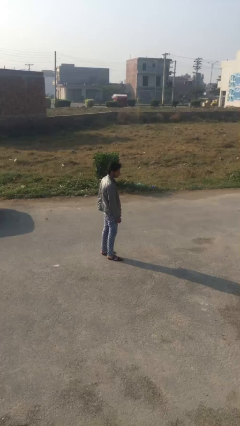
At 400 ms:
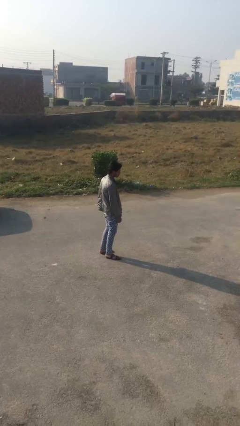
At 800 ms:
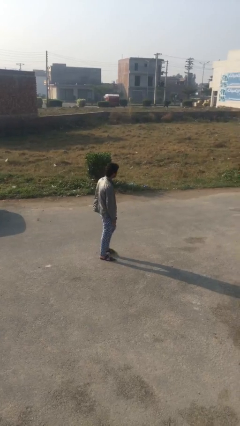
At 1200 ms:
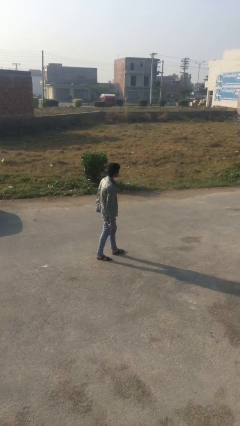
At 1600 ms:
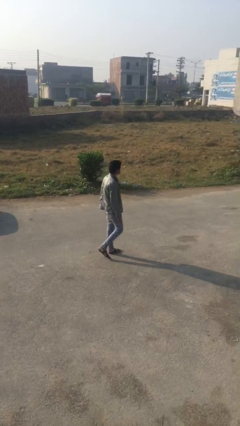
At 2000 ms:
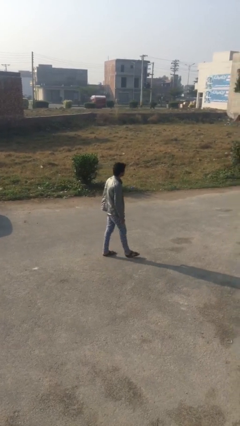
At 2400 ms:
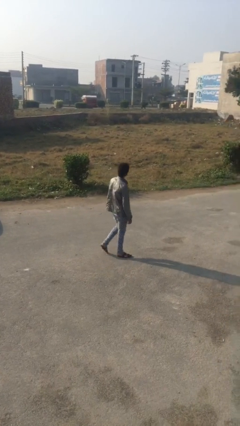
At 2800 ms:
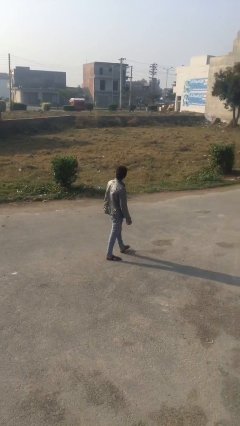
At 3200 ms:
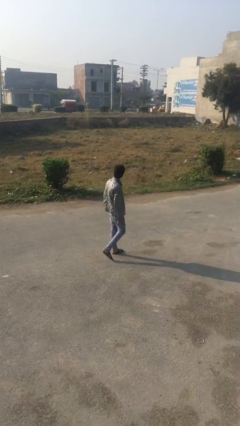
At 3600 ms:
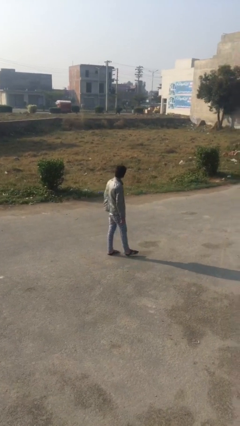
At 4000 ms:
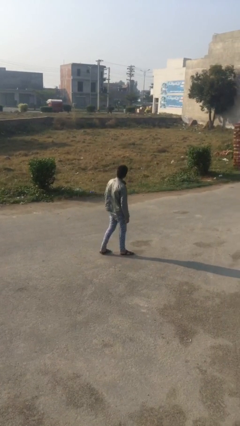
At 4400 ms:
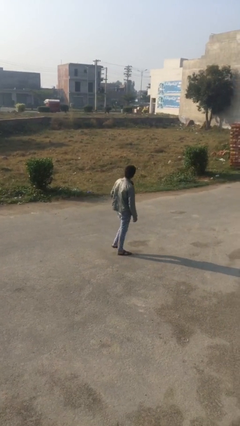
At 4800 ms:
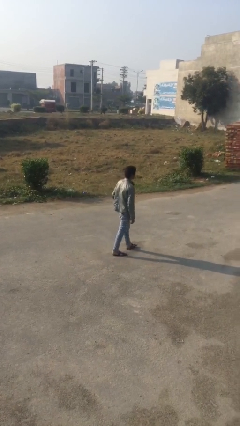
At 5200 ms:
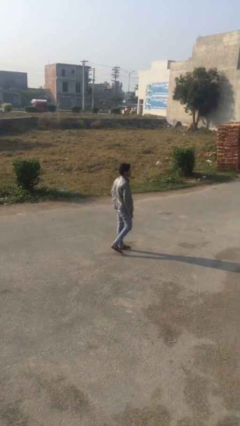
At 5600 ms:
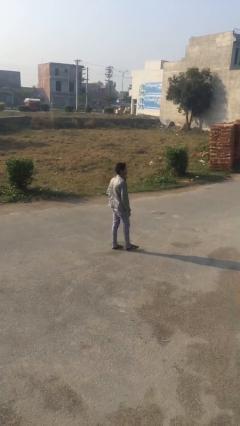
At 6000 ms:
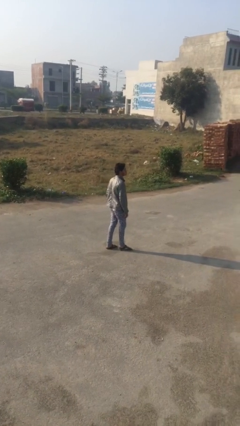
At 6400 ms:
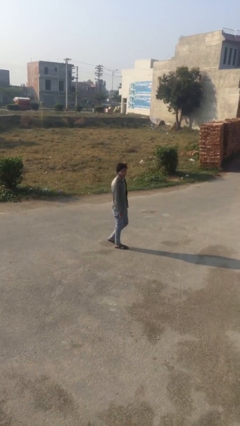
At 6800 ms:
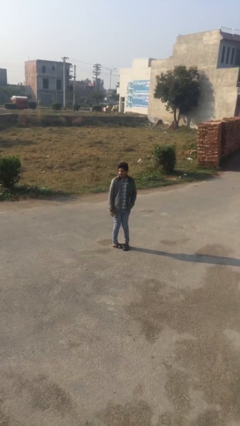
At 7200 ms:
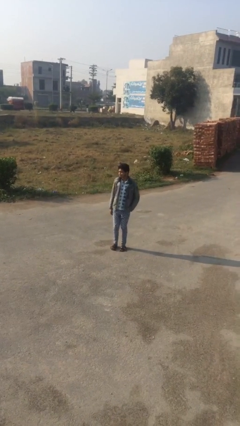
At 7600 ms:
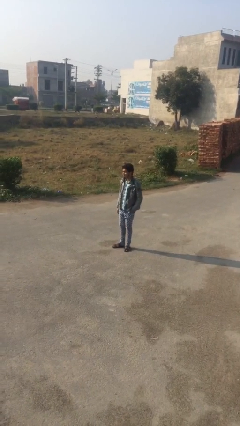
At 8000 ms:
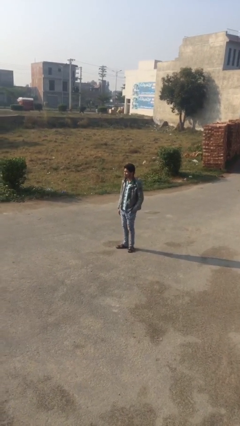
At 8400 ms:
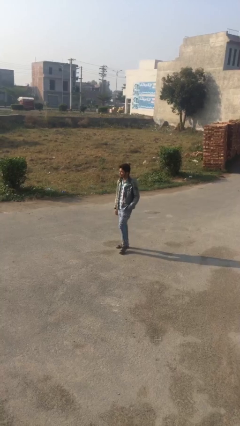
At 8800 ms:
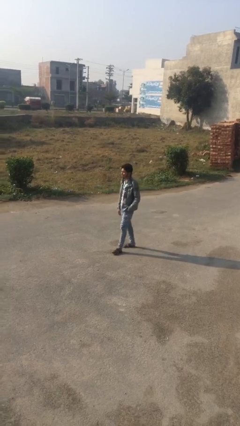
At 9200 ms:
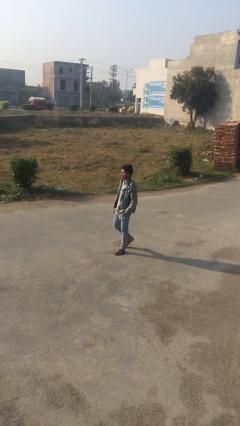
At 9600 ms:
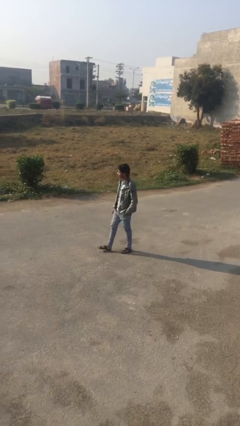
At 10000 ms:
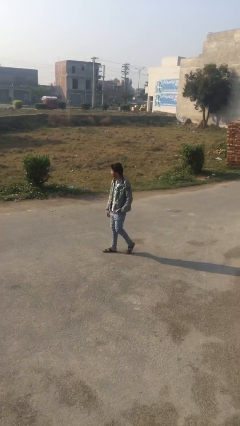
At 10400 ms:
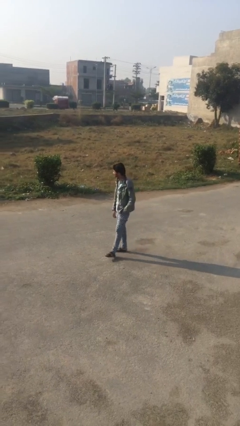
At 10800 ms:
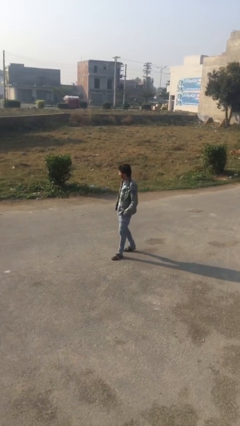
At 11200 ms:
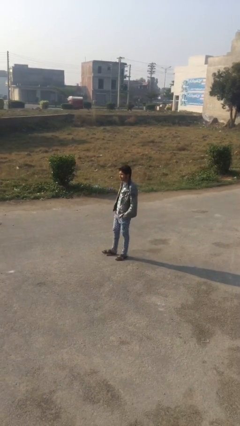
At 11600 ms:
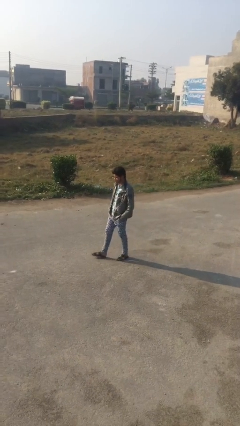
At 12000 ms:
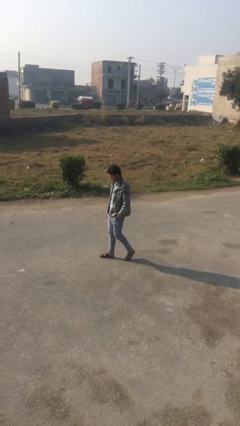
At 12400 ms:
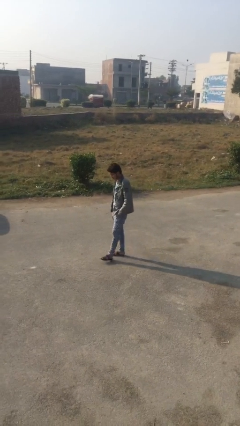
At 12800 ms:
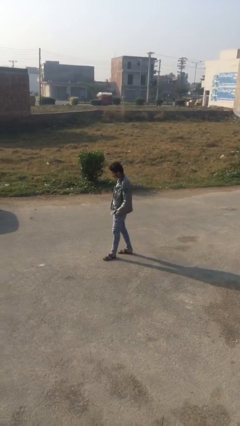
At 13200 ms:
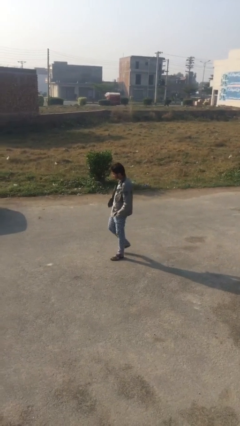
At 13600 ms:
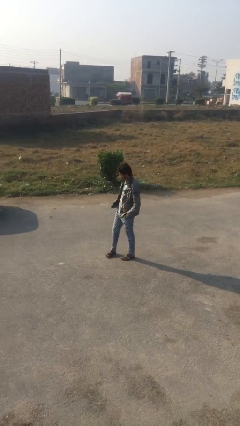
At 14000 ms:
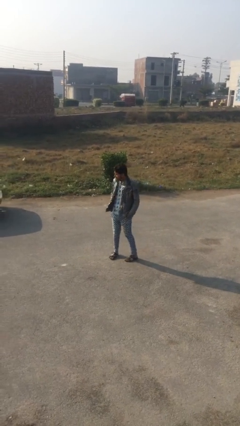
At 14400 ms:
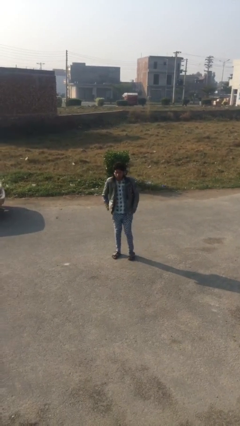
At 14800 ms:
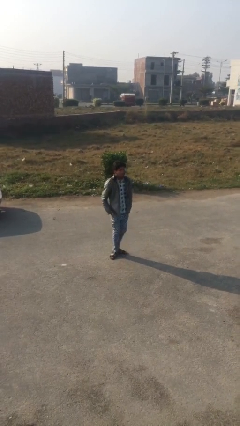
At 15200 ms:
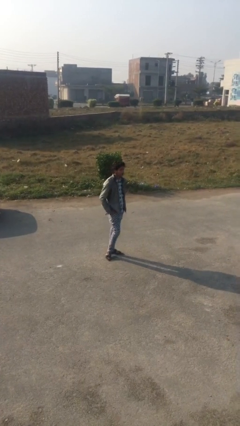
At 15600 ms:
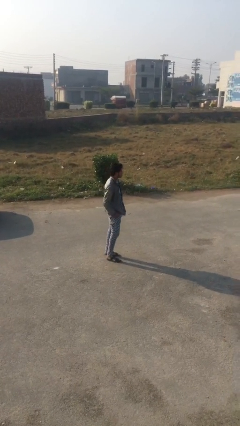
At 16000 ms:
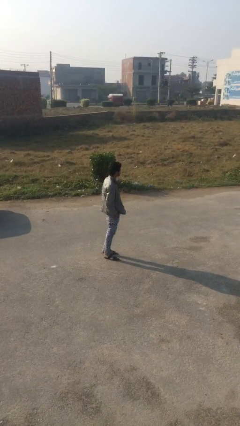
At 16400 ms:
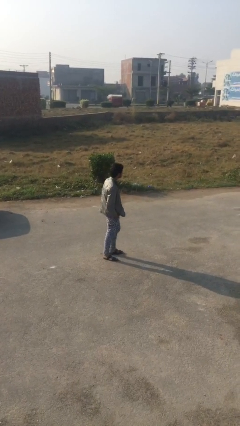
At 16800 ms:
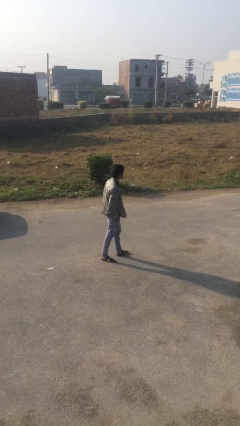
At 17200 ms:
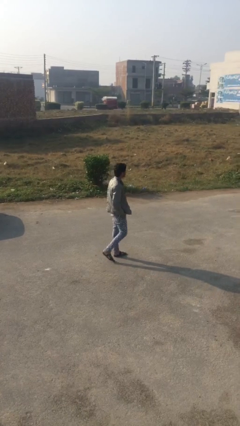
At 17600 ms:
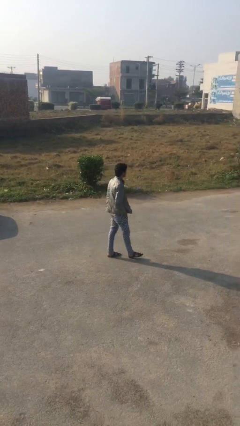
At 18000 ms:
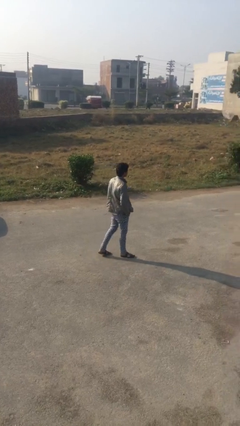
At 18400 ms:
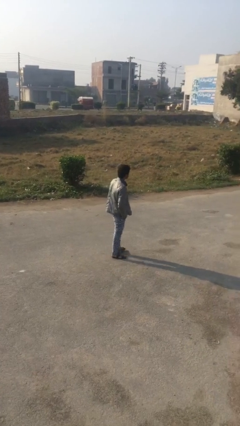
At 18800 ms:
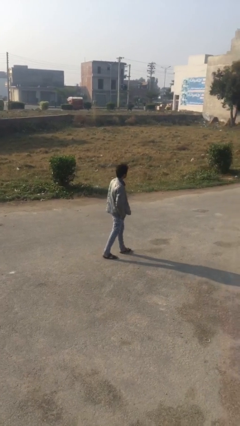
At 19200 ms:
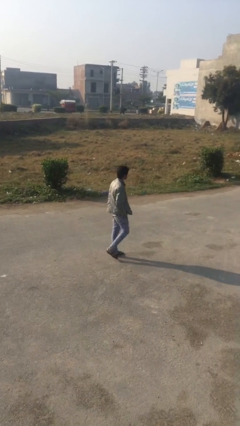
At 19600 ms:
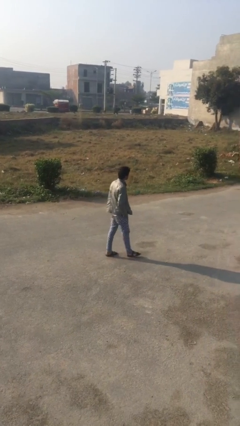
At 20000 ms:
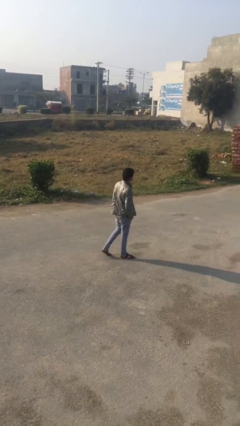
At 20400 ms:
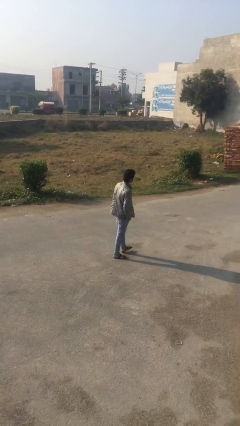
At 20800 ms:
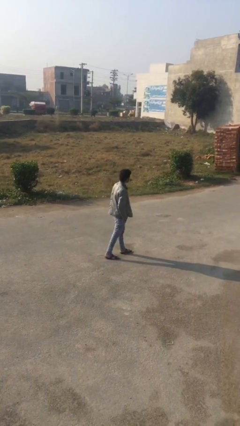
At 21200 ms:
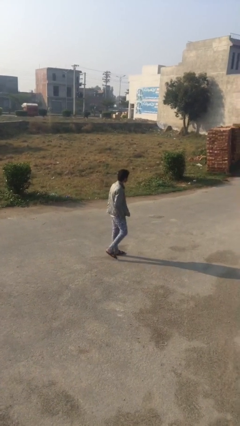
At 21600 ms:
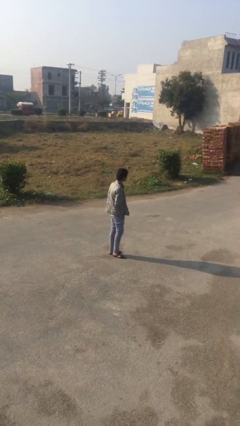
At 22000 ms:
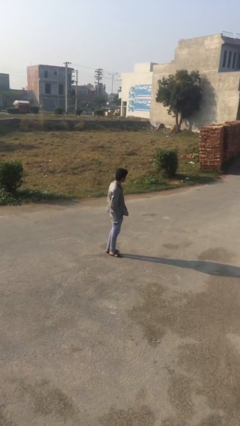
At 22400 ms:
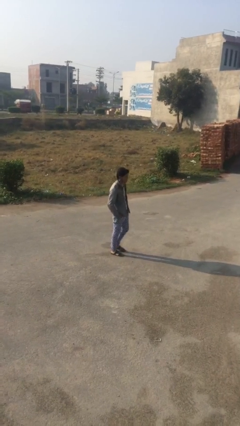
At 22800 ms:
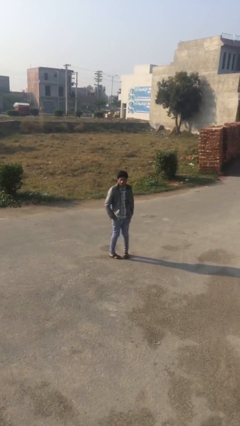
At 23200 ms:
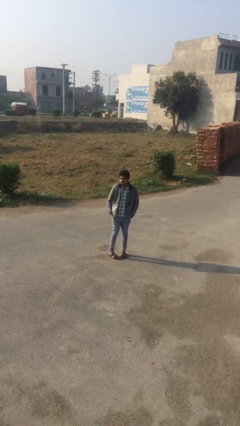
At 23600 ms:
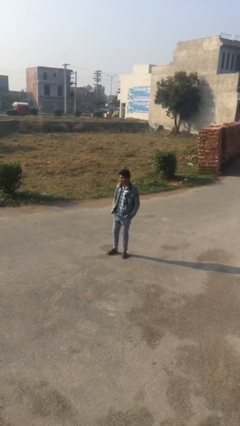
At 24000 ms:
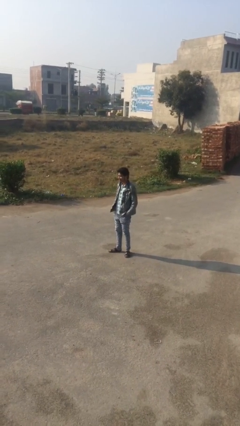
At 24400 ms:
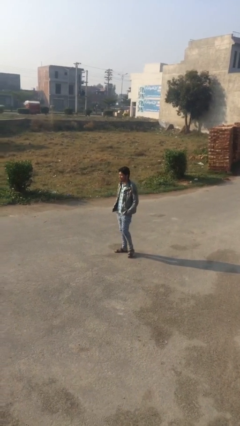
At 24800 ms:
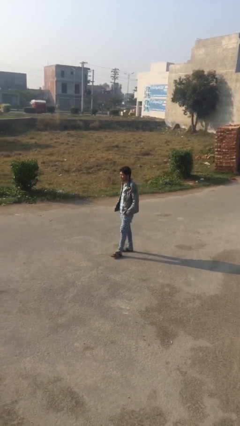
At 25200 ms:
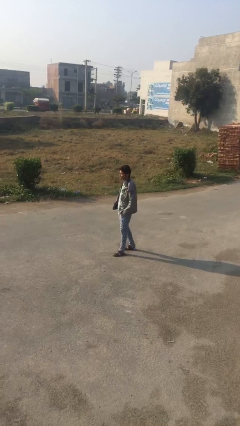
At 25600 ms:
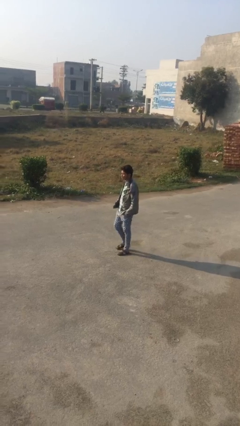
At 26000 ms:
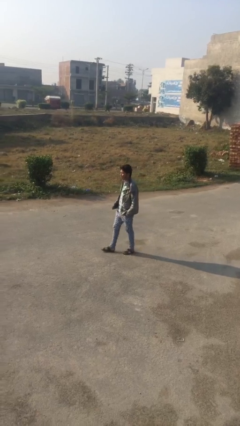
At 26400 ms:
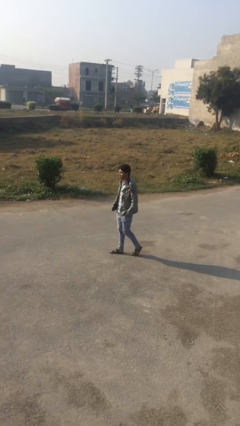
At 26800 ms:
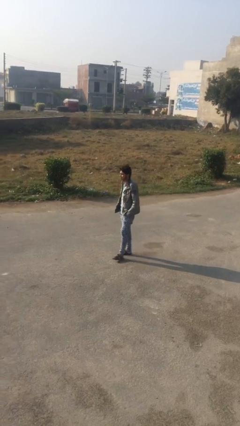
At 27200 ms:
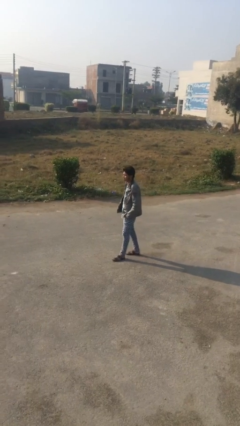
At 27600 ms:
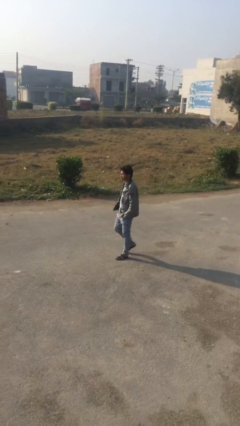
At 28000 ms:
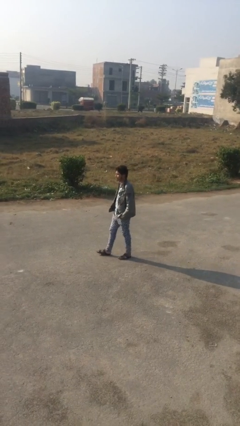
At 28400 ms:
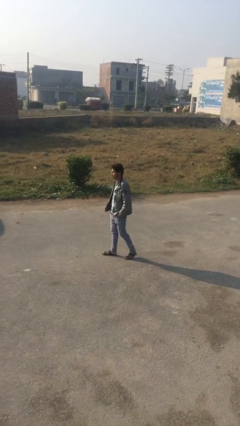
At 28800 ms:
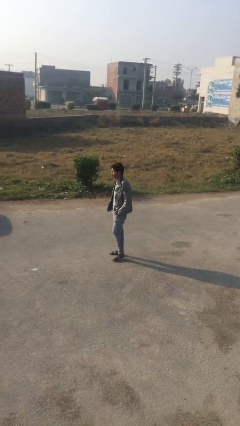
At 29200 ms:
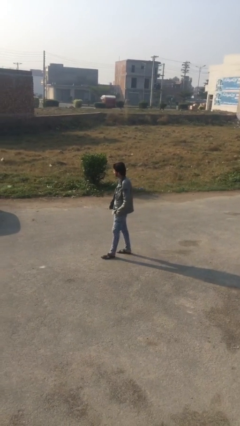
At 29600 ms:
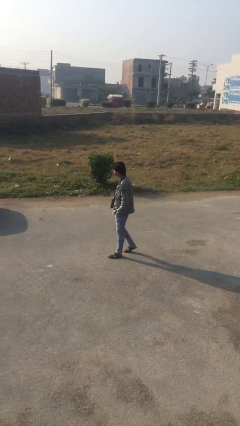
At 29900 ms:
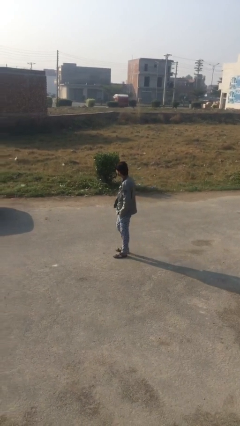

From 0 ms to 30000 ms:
person walks

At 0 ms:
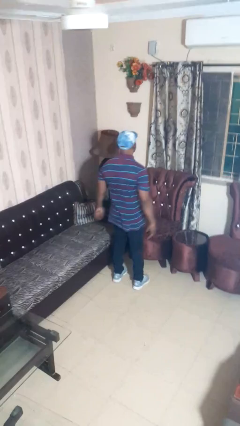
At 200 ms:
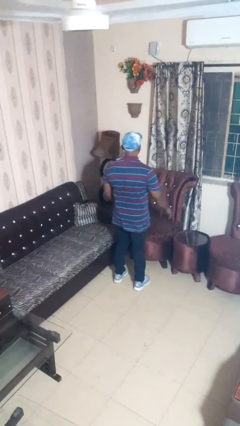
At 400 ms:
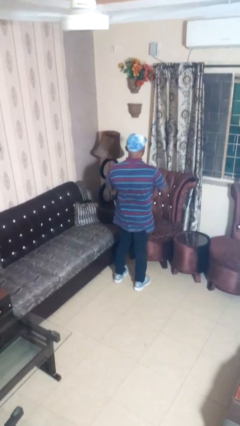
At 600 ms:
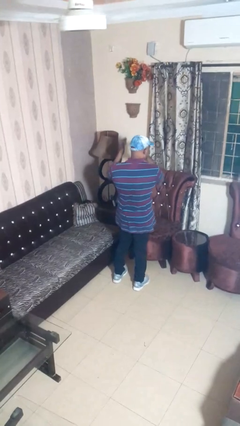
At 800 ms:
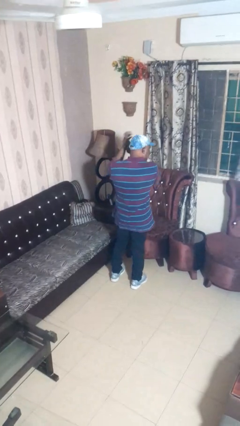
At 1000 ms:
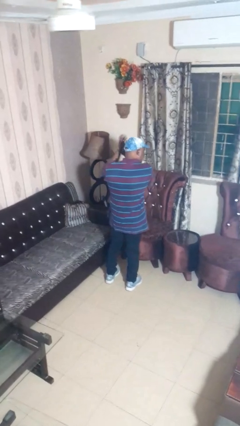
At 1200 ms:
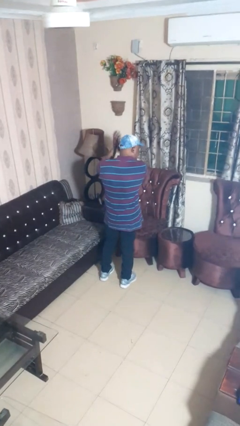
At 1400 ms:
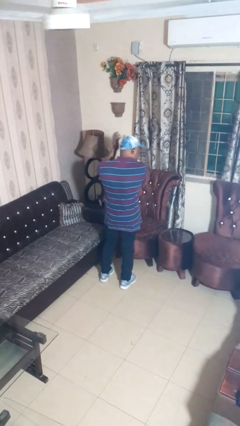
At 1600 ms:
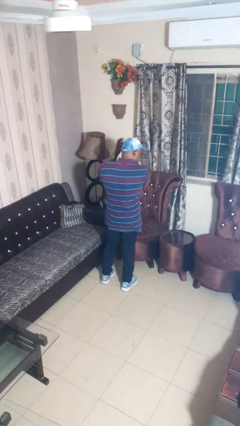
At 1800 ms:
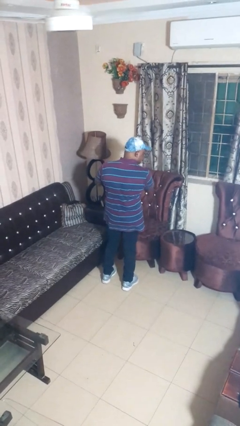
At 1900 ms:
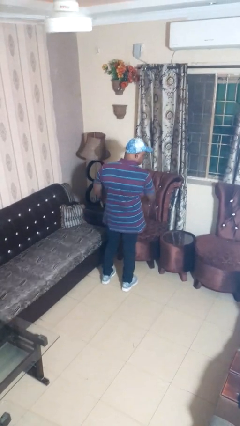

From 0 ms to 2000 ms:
person claps hands

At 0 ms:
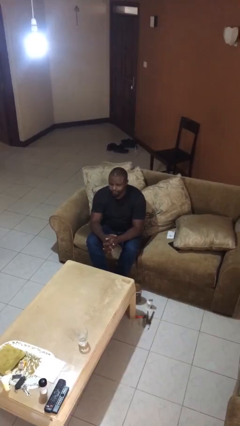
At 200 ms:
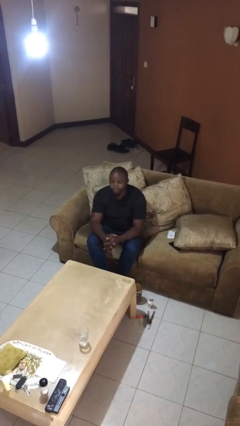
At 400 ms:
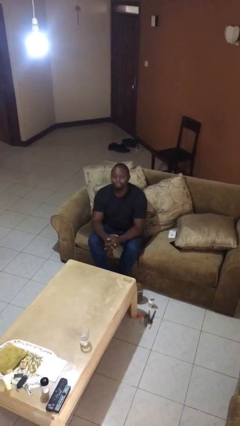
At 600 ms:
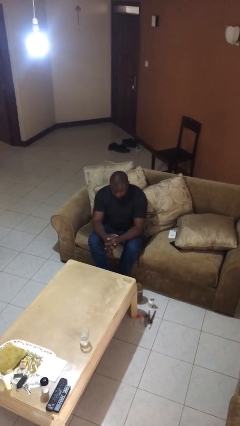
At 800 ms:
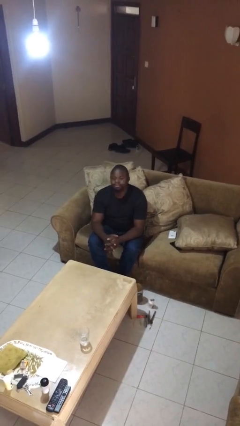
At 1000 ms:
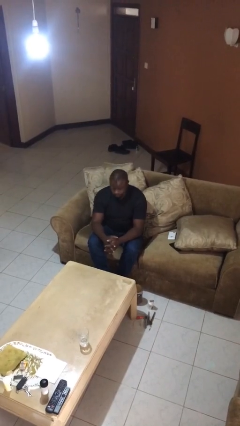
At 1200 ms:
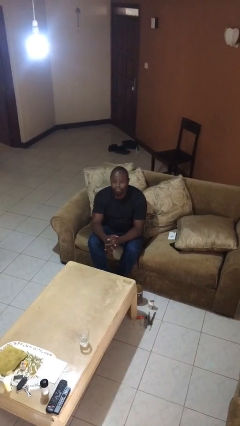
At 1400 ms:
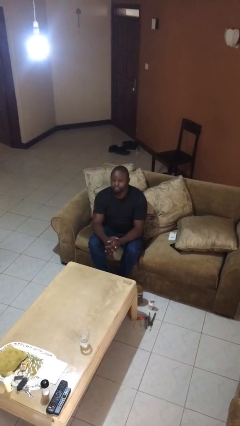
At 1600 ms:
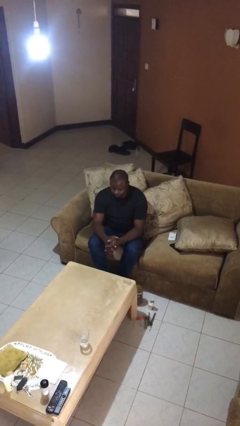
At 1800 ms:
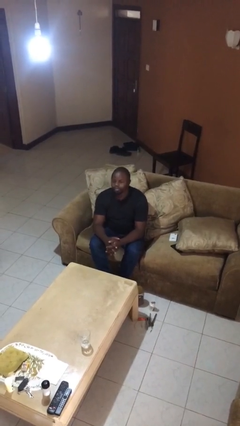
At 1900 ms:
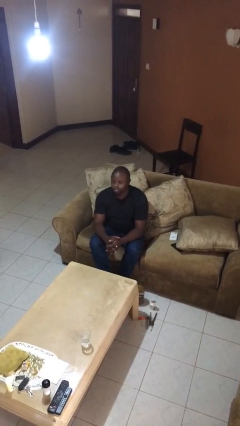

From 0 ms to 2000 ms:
person nods head
